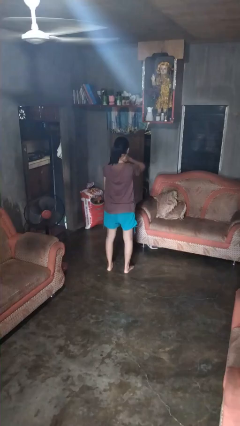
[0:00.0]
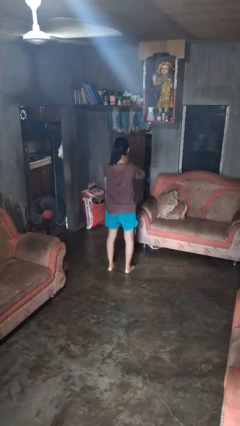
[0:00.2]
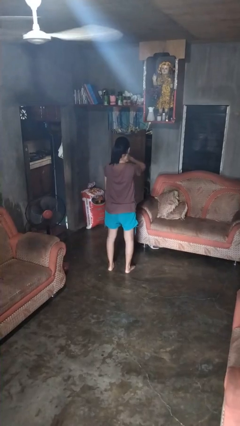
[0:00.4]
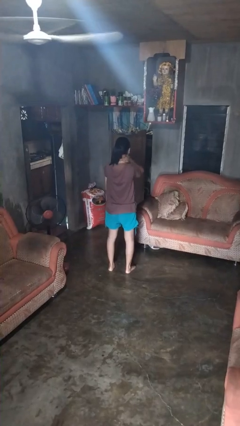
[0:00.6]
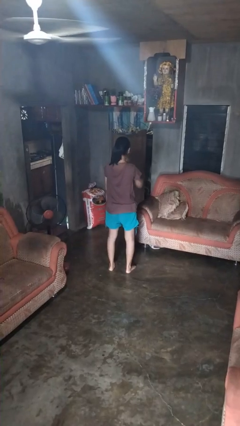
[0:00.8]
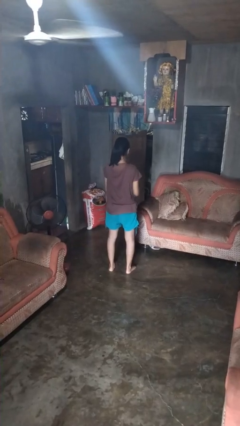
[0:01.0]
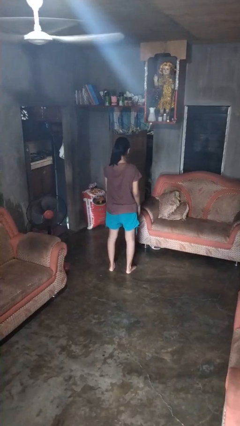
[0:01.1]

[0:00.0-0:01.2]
person rubs neck

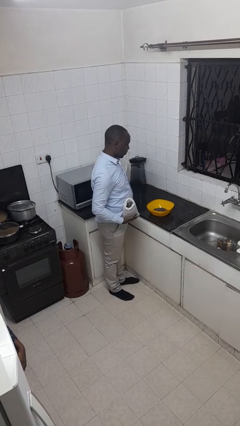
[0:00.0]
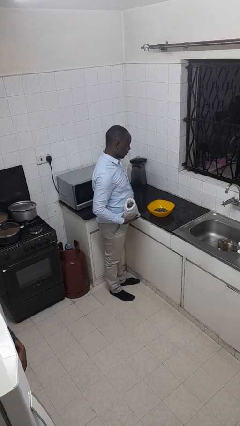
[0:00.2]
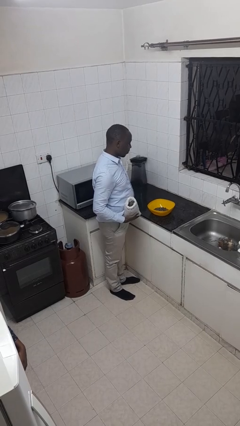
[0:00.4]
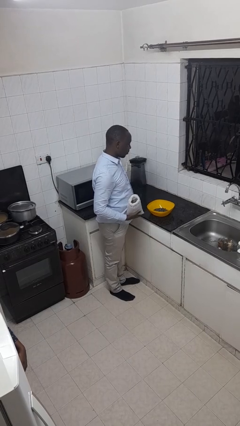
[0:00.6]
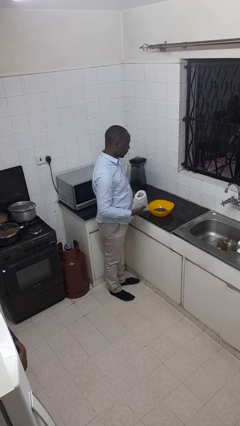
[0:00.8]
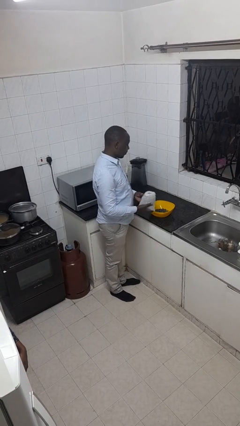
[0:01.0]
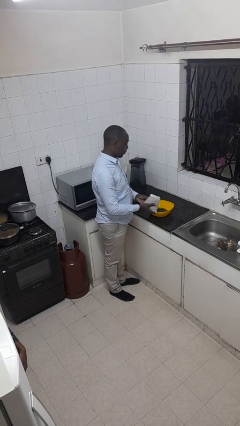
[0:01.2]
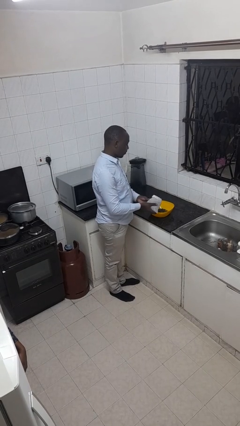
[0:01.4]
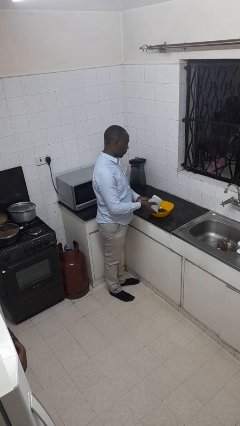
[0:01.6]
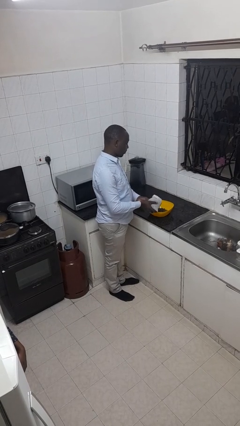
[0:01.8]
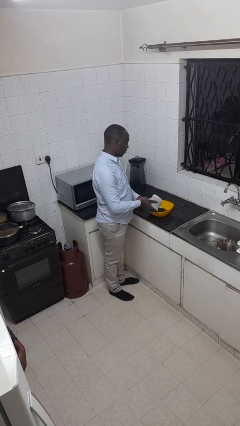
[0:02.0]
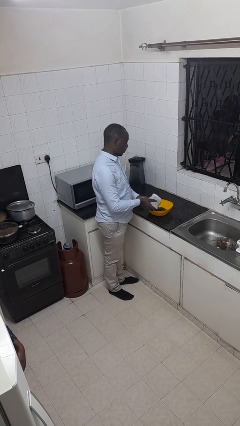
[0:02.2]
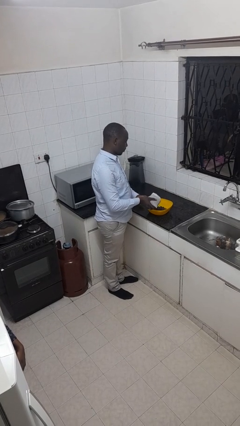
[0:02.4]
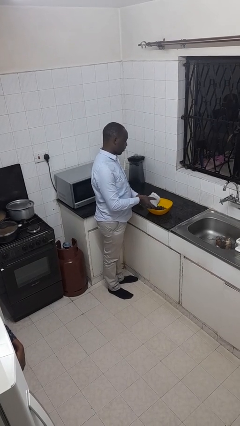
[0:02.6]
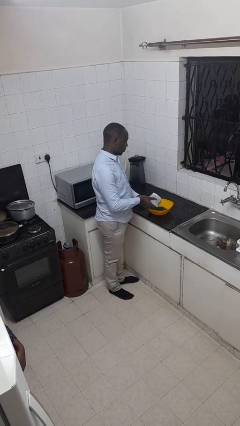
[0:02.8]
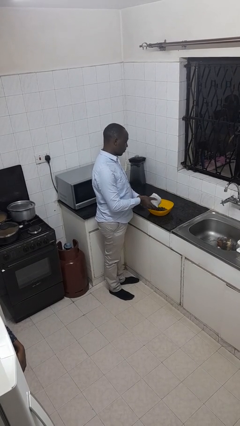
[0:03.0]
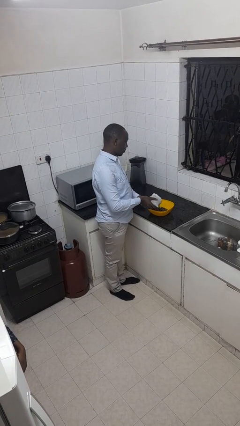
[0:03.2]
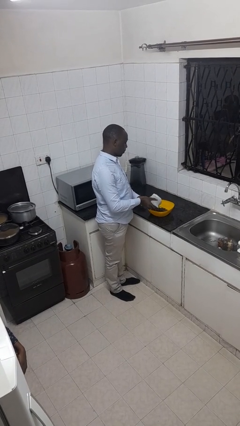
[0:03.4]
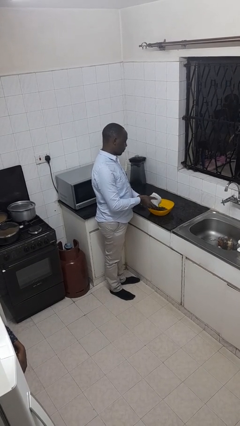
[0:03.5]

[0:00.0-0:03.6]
person pours into bowl

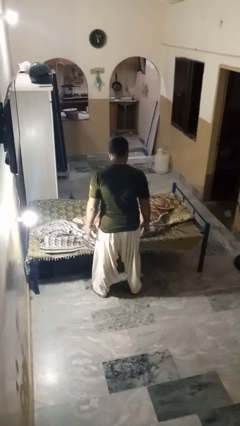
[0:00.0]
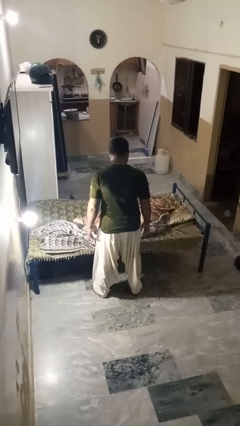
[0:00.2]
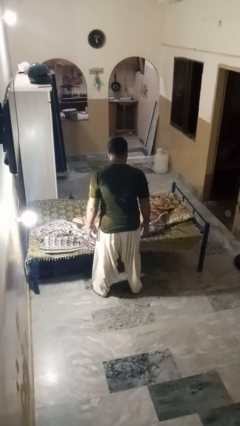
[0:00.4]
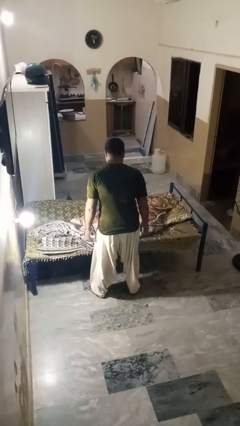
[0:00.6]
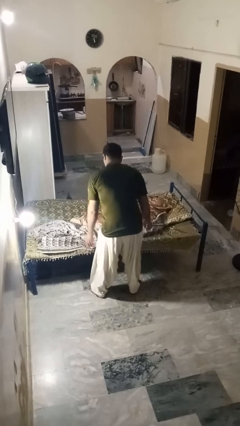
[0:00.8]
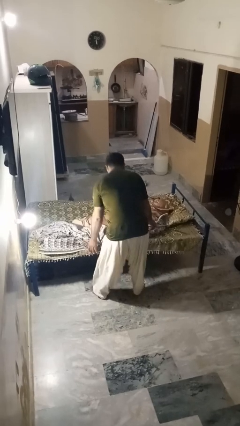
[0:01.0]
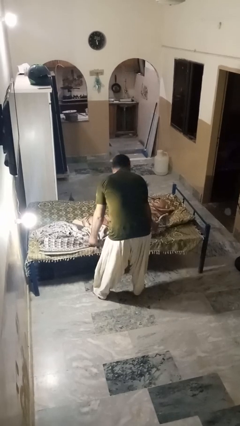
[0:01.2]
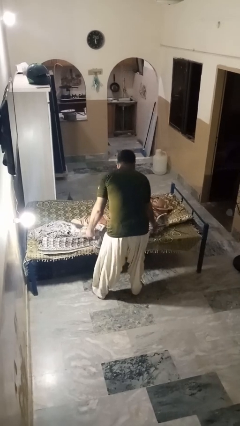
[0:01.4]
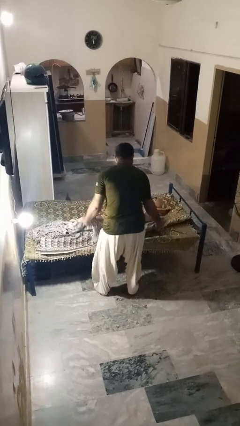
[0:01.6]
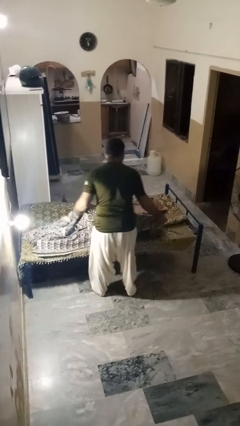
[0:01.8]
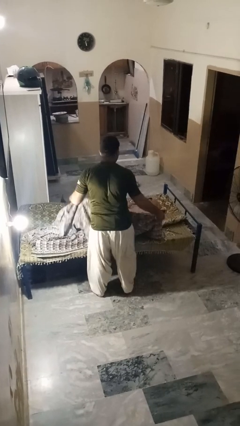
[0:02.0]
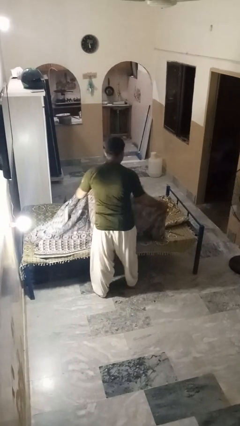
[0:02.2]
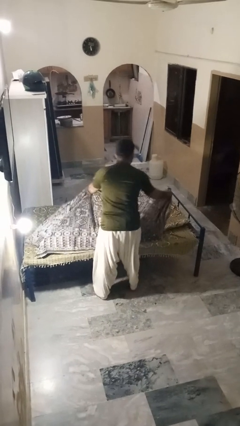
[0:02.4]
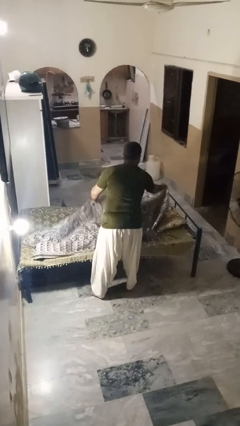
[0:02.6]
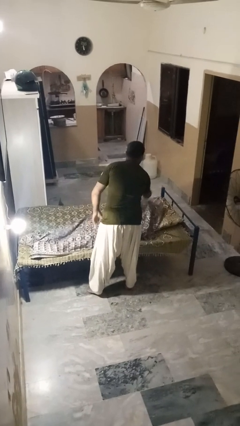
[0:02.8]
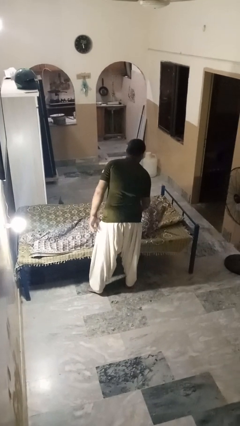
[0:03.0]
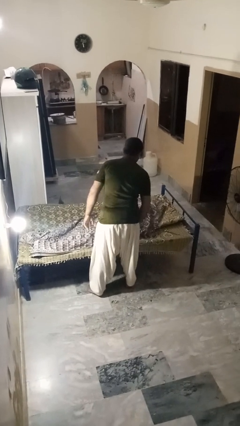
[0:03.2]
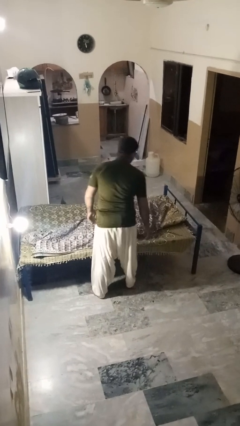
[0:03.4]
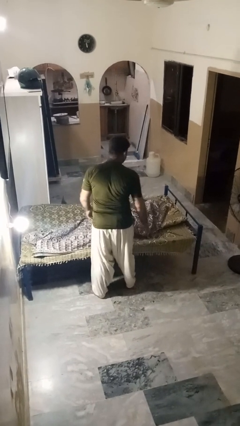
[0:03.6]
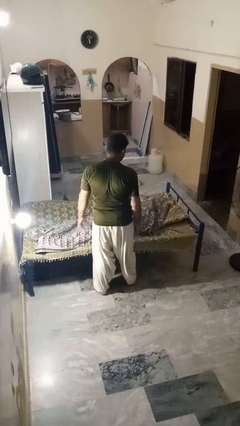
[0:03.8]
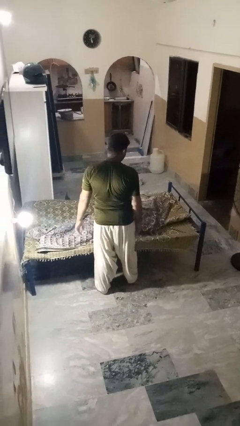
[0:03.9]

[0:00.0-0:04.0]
person covers friend with blanket

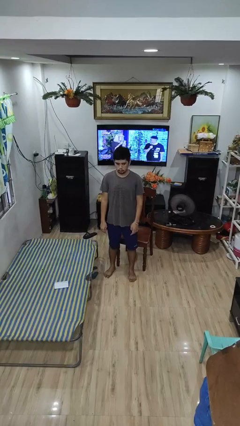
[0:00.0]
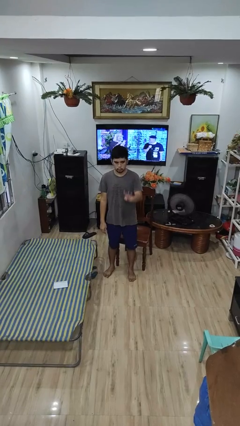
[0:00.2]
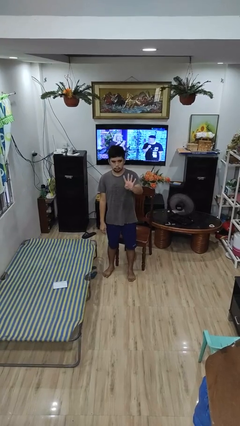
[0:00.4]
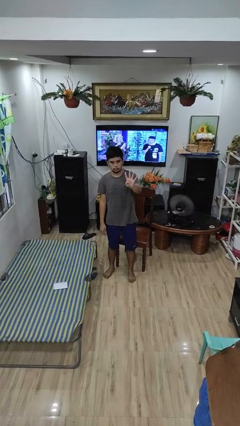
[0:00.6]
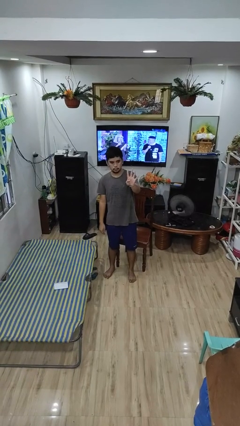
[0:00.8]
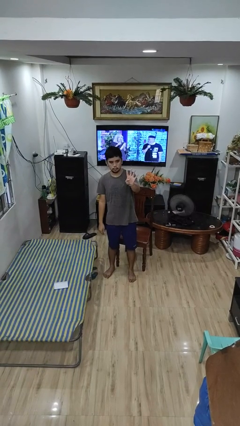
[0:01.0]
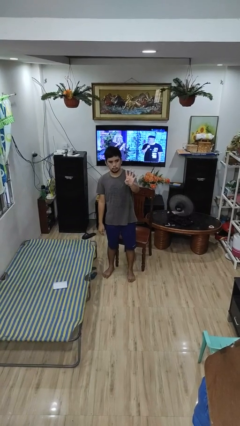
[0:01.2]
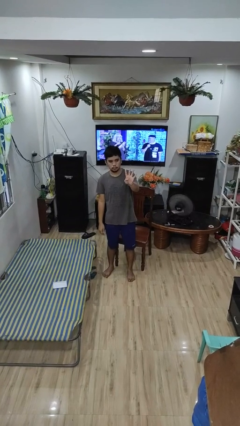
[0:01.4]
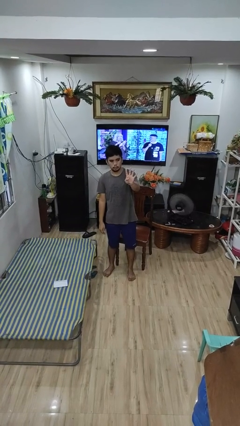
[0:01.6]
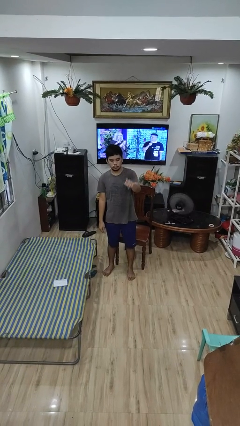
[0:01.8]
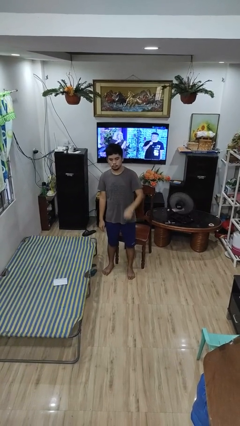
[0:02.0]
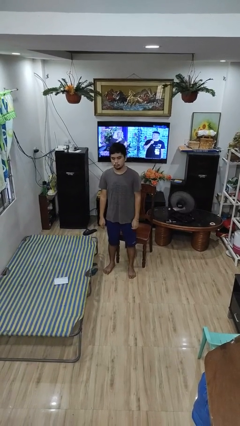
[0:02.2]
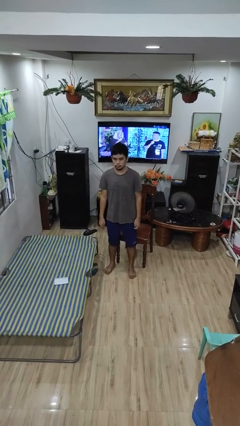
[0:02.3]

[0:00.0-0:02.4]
person gestures number four

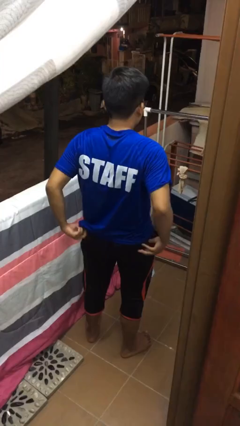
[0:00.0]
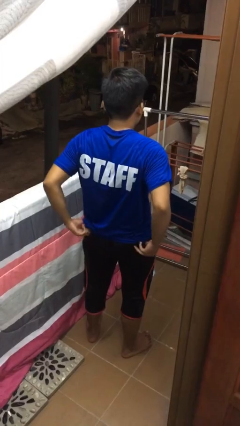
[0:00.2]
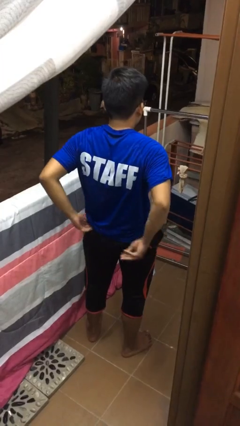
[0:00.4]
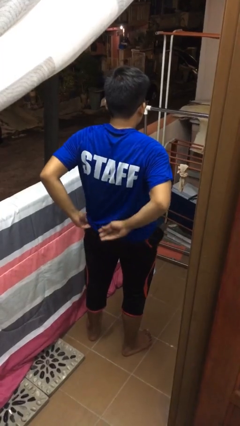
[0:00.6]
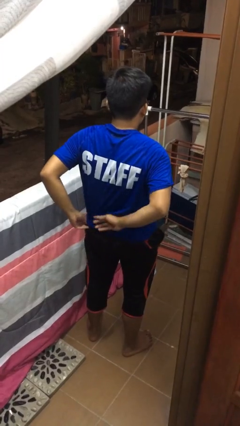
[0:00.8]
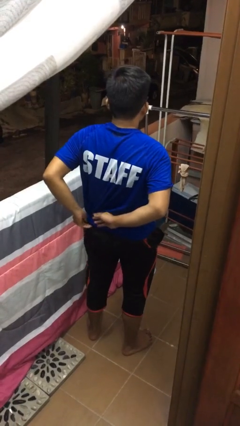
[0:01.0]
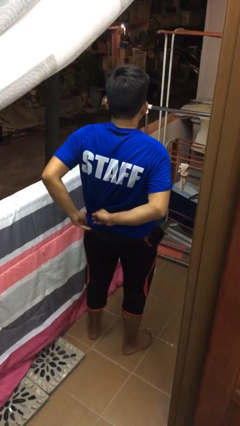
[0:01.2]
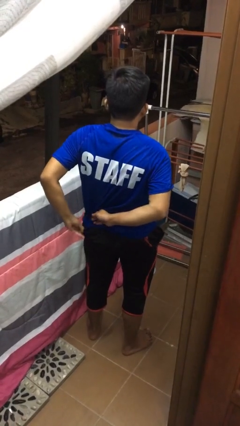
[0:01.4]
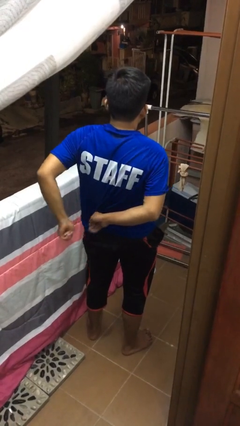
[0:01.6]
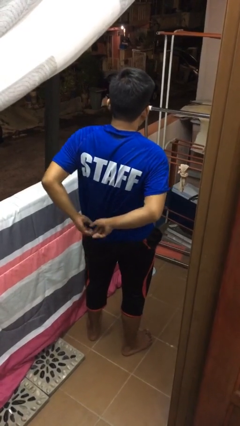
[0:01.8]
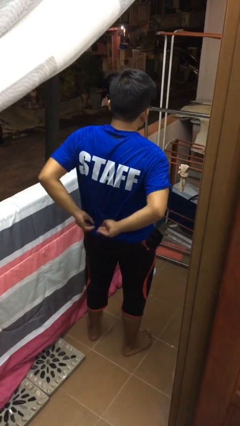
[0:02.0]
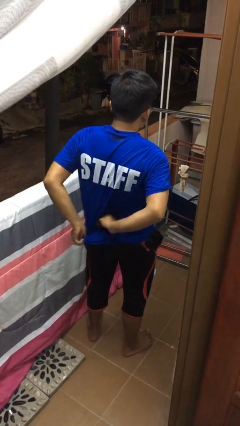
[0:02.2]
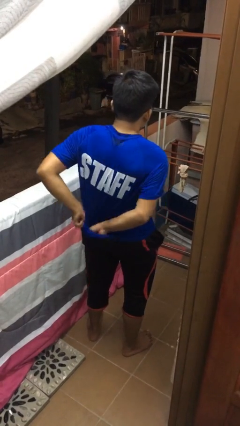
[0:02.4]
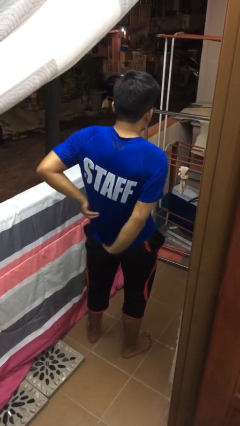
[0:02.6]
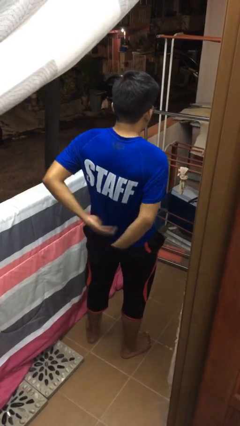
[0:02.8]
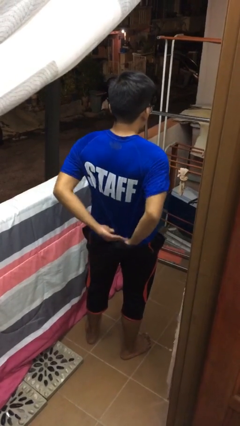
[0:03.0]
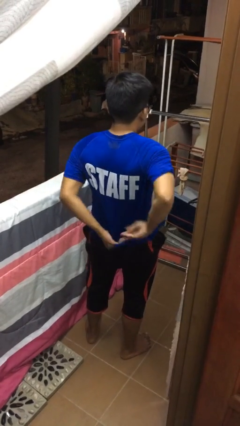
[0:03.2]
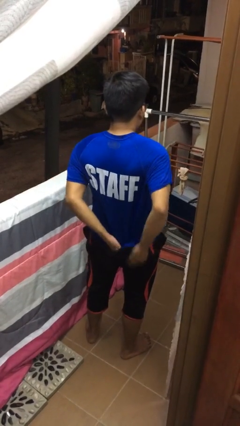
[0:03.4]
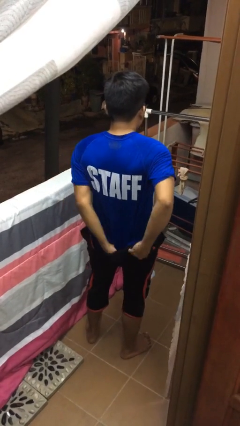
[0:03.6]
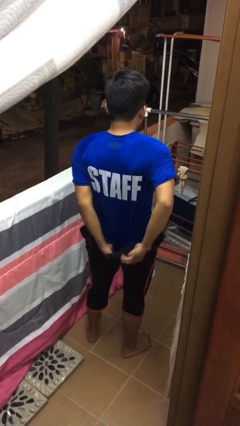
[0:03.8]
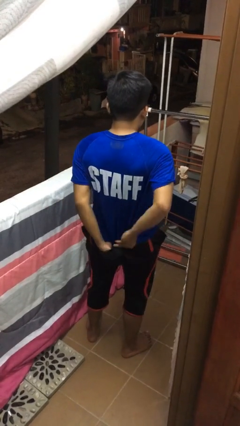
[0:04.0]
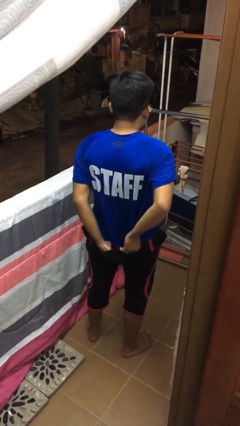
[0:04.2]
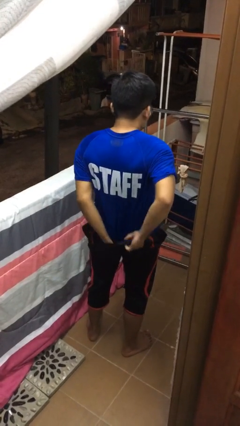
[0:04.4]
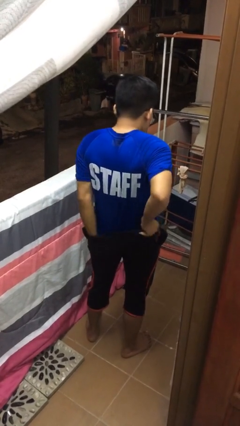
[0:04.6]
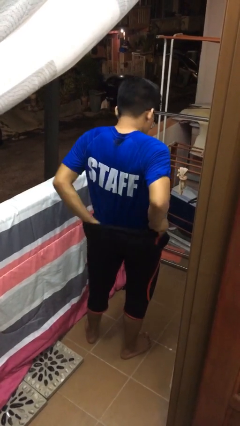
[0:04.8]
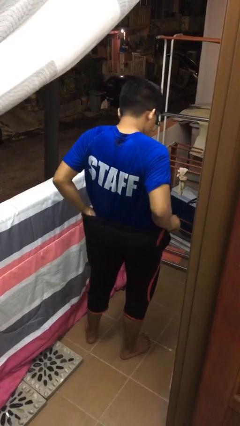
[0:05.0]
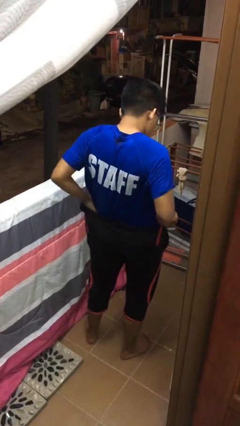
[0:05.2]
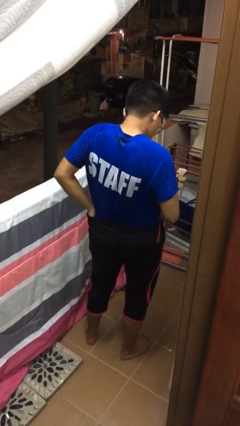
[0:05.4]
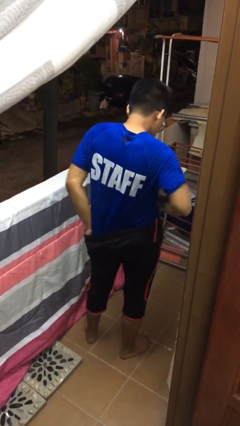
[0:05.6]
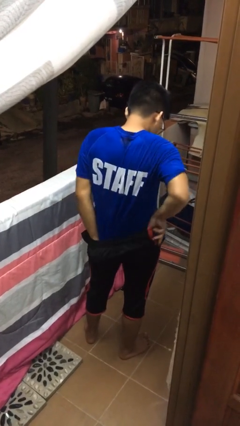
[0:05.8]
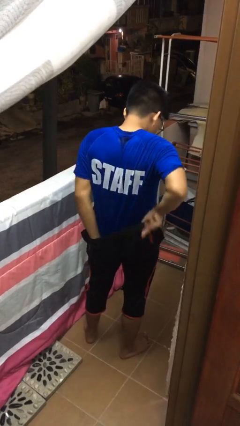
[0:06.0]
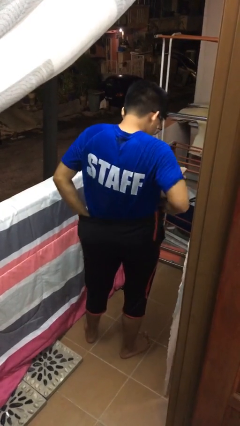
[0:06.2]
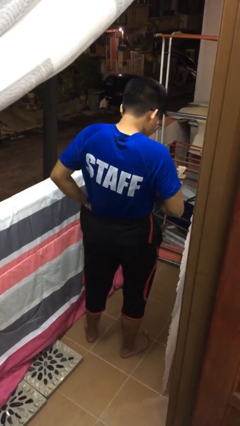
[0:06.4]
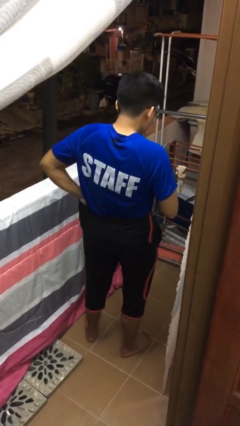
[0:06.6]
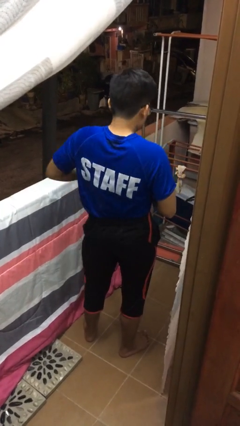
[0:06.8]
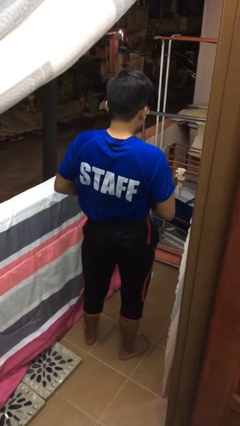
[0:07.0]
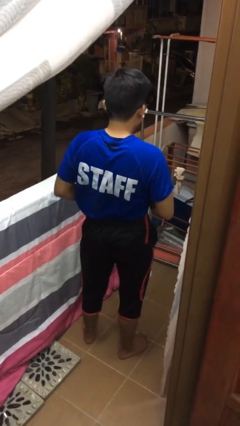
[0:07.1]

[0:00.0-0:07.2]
person tucks in shirt
